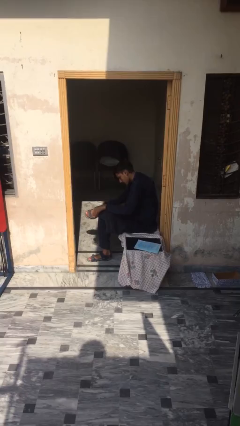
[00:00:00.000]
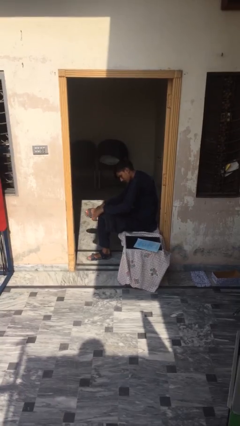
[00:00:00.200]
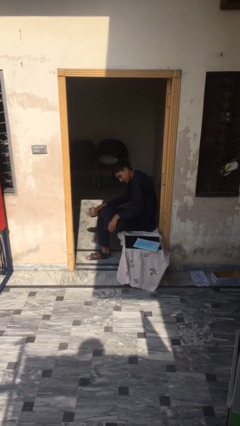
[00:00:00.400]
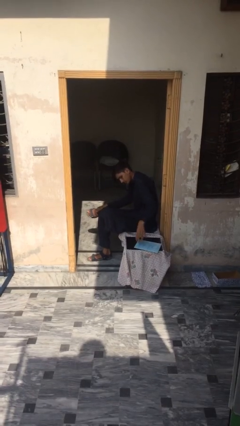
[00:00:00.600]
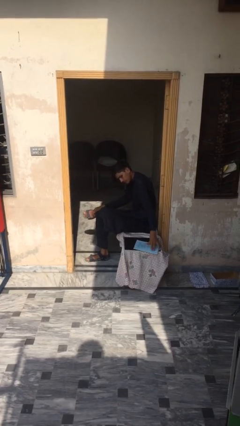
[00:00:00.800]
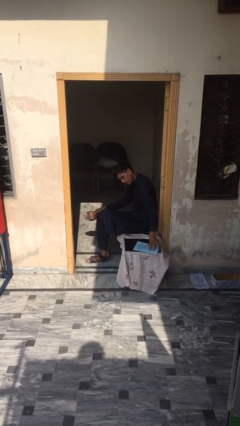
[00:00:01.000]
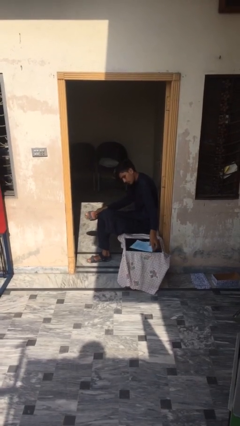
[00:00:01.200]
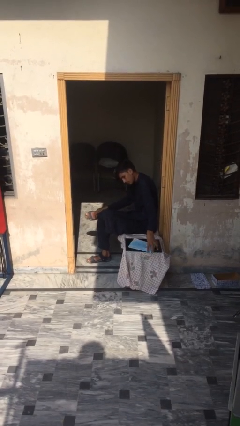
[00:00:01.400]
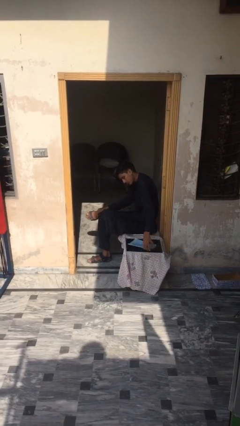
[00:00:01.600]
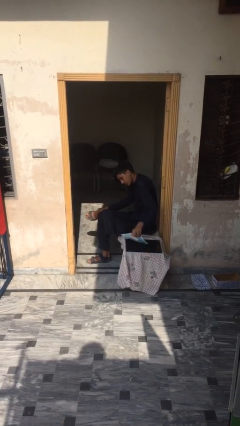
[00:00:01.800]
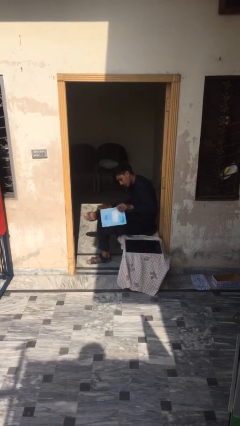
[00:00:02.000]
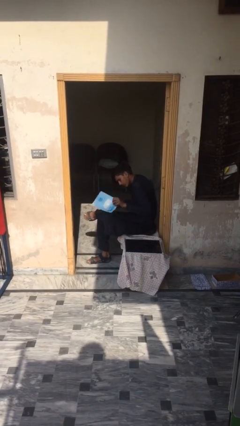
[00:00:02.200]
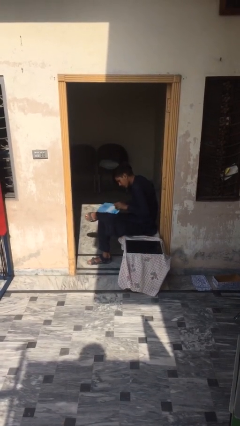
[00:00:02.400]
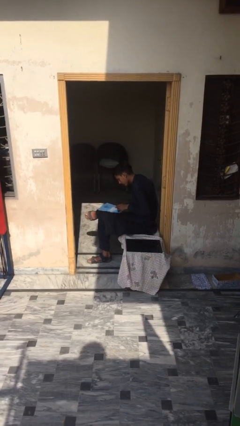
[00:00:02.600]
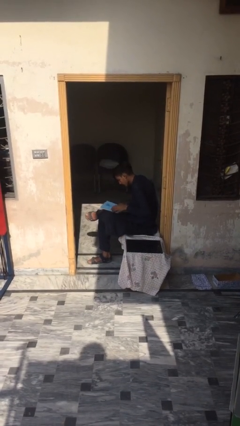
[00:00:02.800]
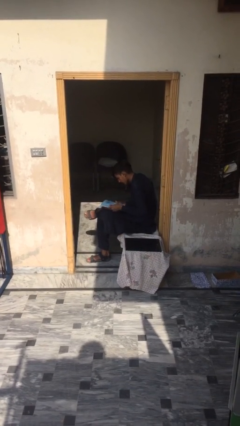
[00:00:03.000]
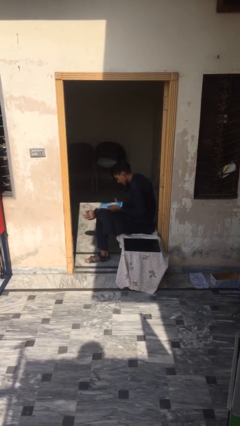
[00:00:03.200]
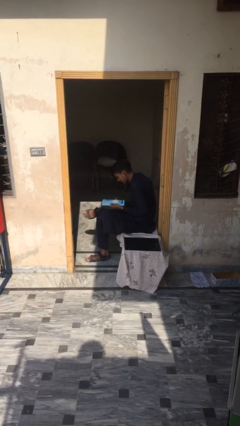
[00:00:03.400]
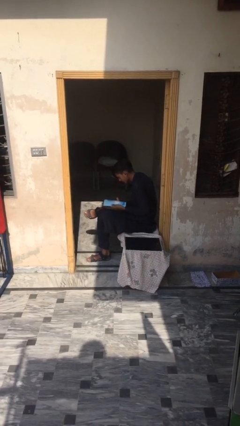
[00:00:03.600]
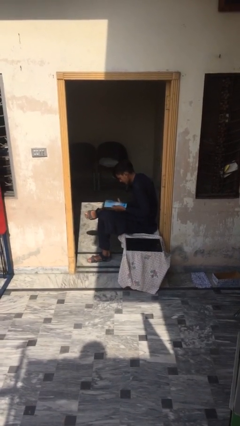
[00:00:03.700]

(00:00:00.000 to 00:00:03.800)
person picks up object from table

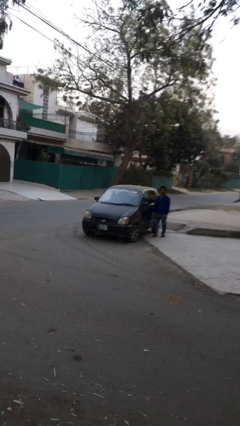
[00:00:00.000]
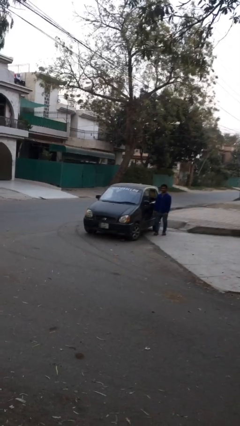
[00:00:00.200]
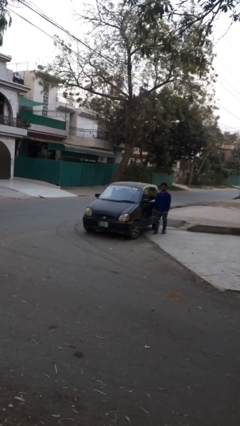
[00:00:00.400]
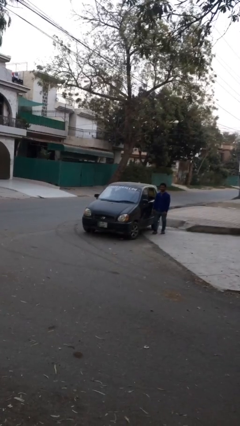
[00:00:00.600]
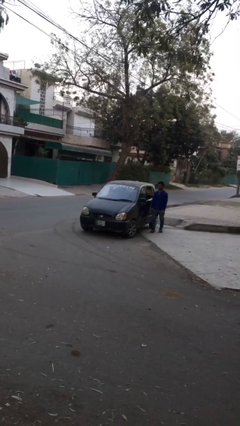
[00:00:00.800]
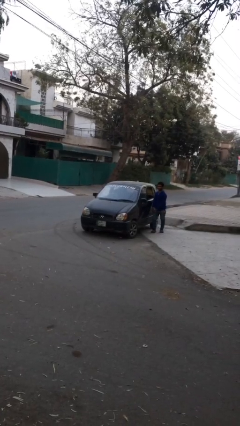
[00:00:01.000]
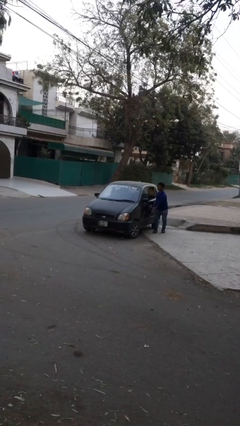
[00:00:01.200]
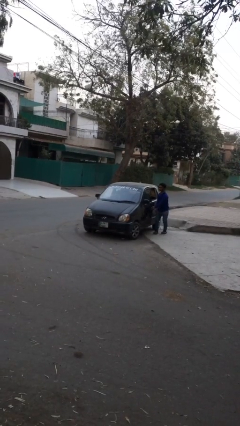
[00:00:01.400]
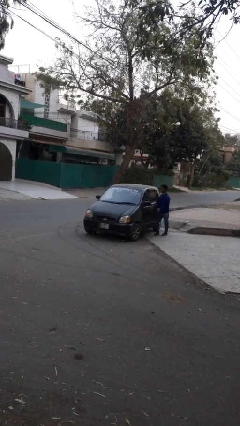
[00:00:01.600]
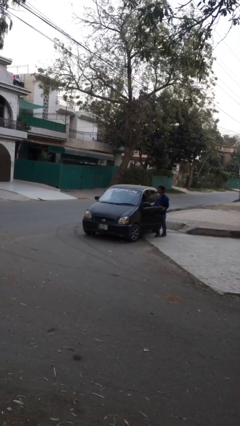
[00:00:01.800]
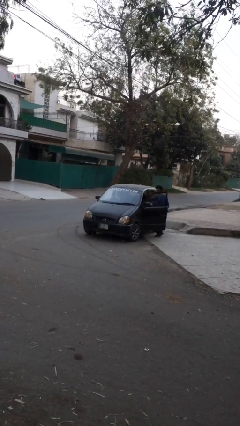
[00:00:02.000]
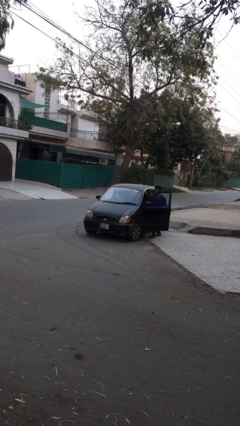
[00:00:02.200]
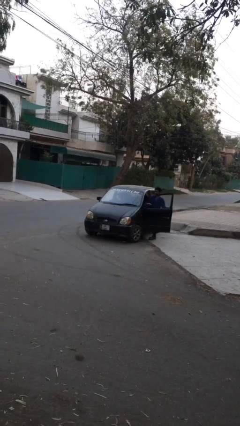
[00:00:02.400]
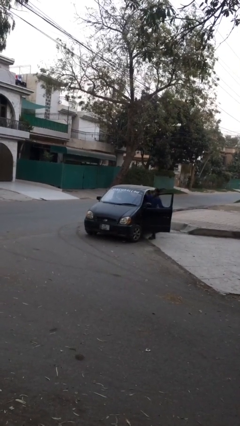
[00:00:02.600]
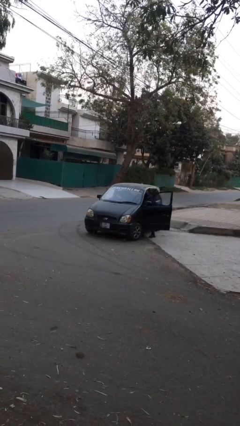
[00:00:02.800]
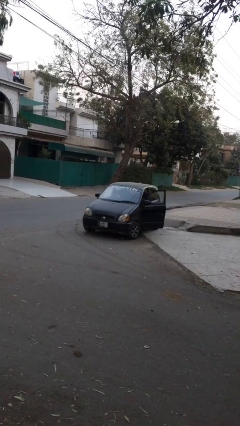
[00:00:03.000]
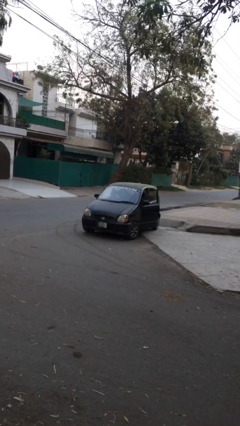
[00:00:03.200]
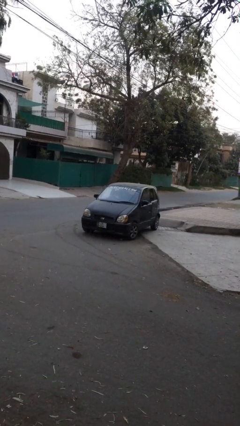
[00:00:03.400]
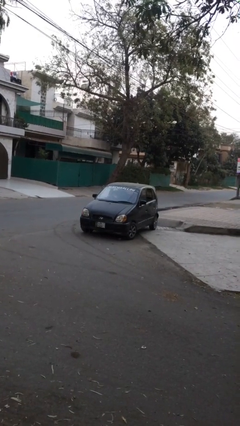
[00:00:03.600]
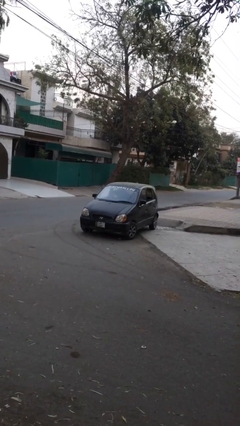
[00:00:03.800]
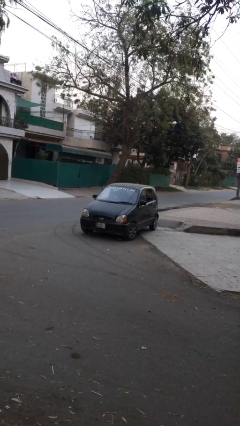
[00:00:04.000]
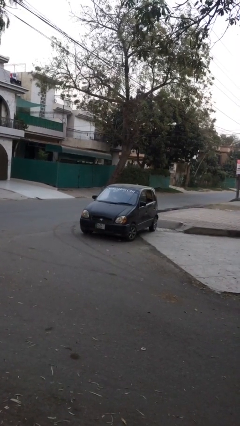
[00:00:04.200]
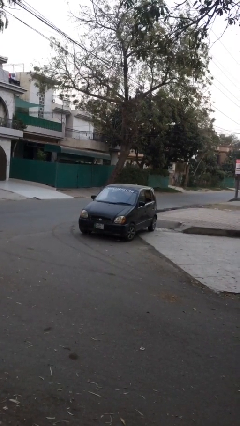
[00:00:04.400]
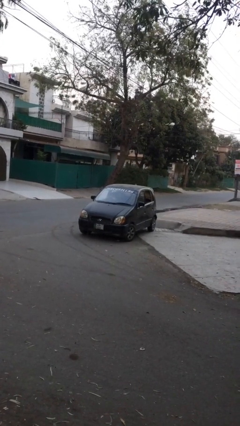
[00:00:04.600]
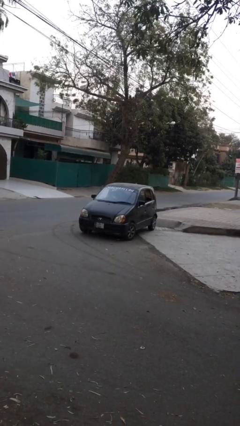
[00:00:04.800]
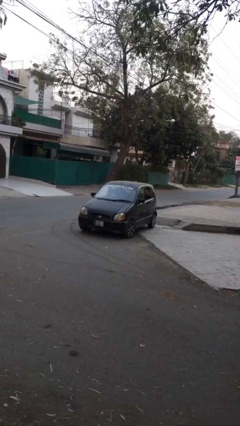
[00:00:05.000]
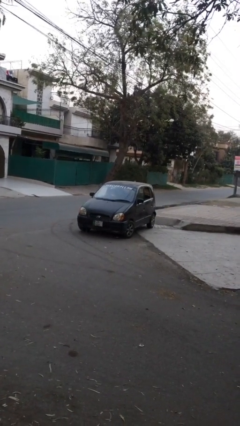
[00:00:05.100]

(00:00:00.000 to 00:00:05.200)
car picks up person

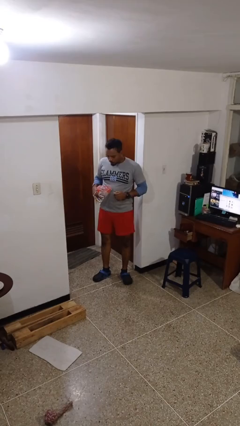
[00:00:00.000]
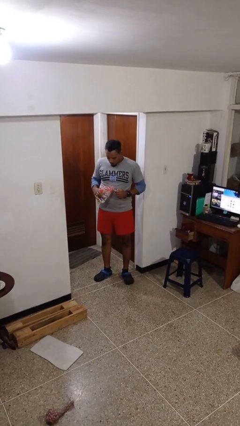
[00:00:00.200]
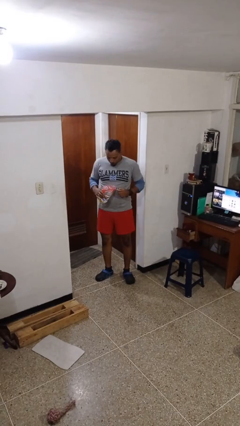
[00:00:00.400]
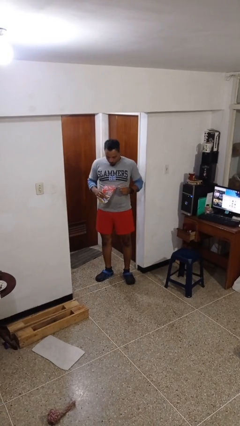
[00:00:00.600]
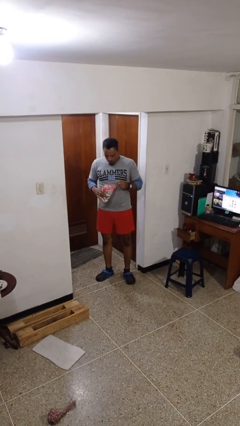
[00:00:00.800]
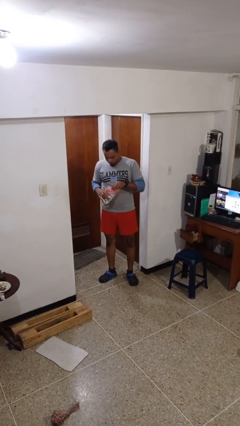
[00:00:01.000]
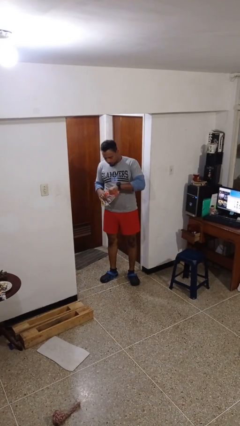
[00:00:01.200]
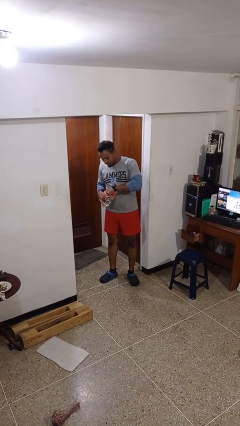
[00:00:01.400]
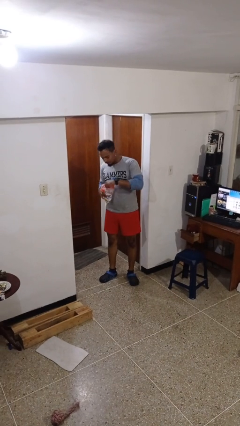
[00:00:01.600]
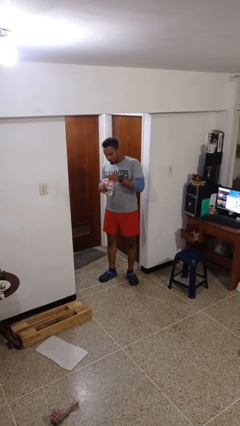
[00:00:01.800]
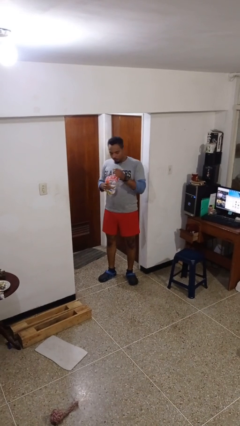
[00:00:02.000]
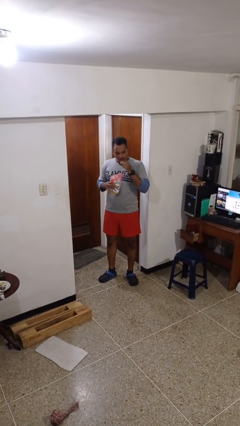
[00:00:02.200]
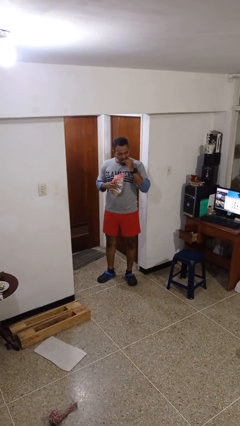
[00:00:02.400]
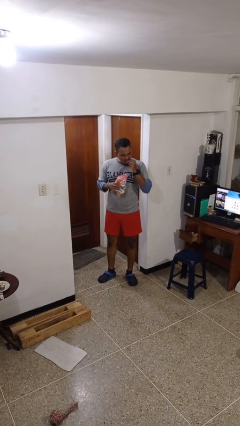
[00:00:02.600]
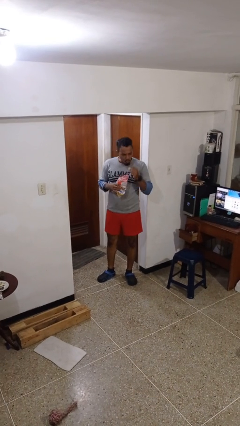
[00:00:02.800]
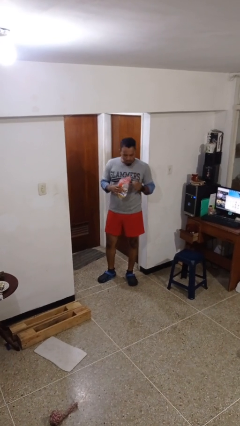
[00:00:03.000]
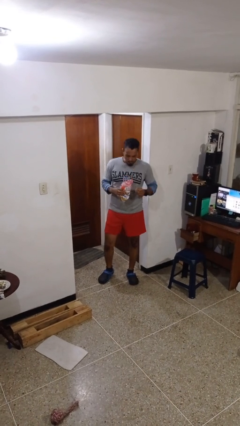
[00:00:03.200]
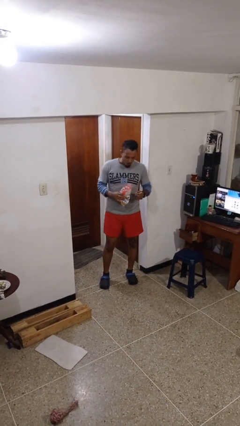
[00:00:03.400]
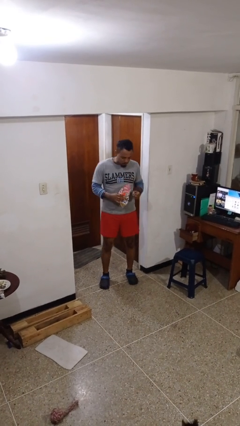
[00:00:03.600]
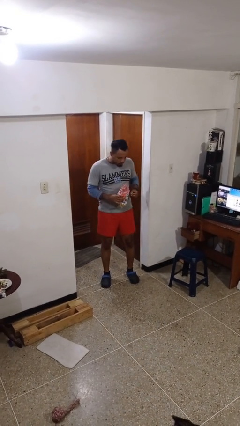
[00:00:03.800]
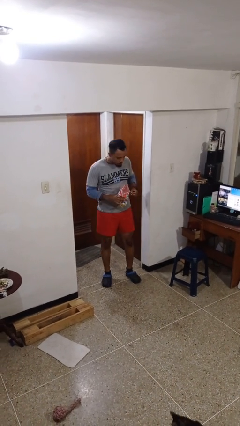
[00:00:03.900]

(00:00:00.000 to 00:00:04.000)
person eats snack from bag

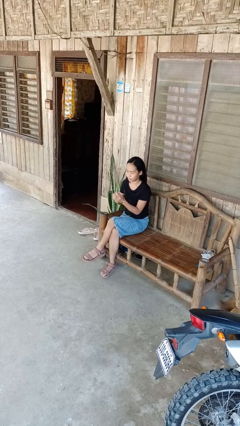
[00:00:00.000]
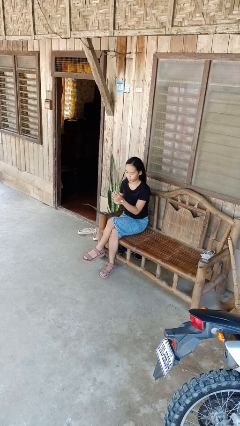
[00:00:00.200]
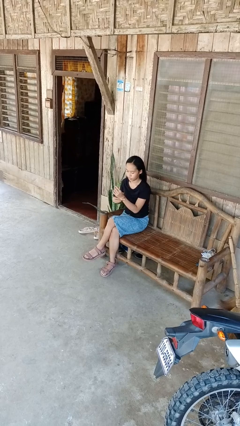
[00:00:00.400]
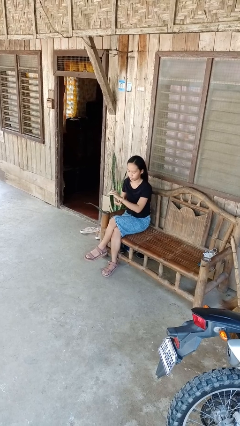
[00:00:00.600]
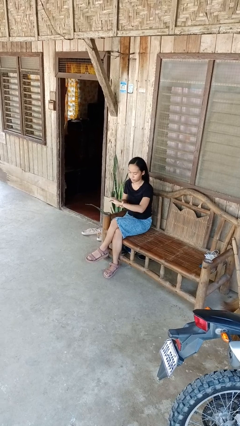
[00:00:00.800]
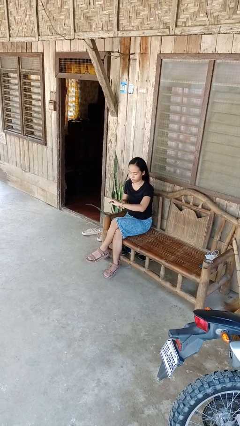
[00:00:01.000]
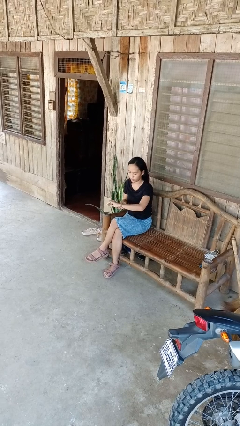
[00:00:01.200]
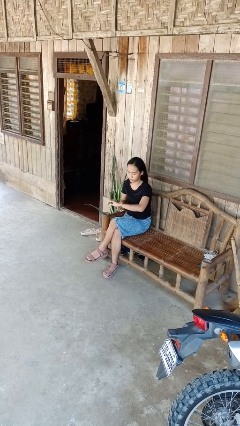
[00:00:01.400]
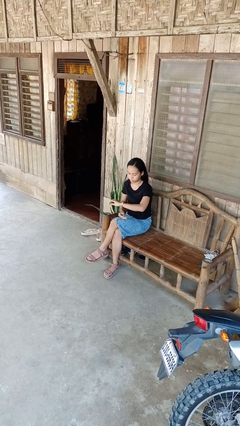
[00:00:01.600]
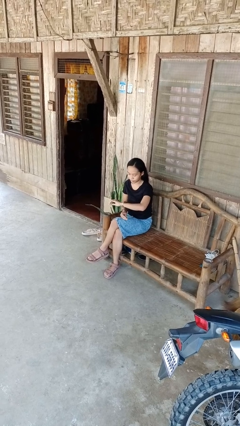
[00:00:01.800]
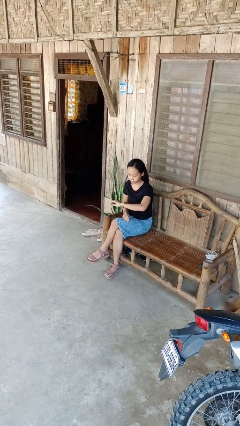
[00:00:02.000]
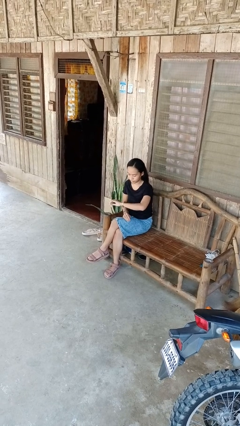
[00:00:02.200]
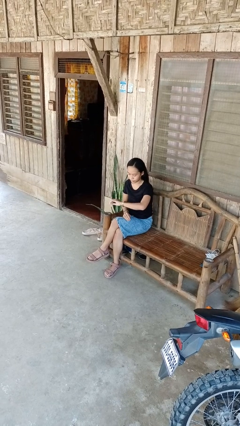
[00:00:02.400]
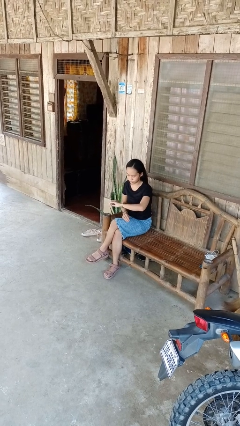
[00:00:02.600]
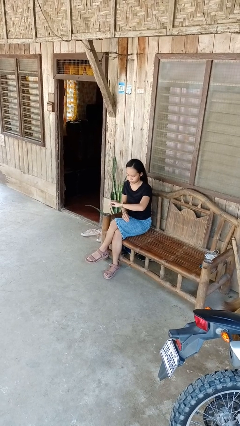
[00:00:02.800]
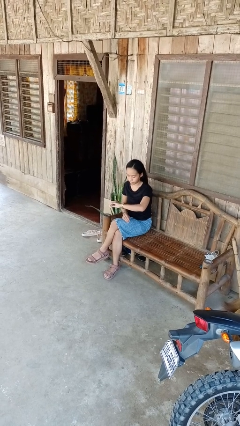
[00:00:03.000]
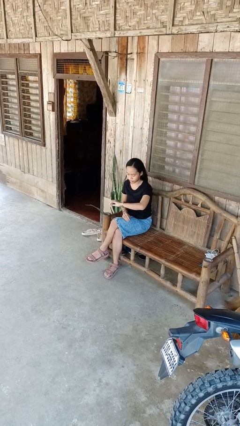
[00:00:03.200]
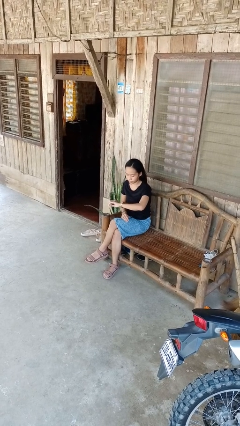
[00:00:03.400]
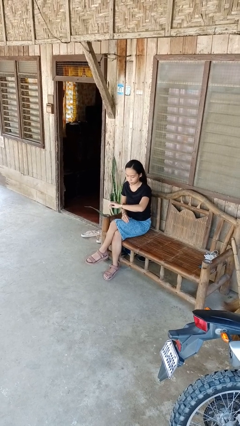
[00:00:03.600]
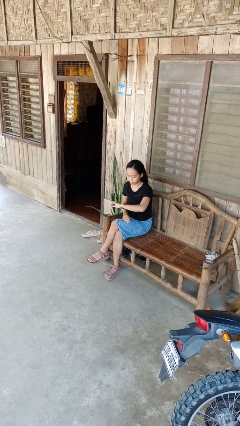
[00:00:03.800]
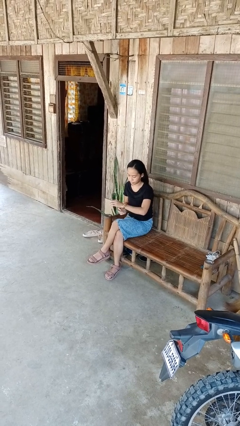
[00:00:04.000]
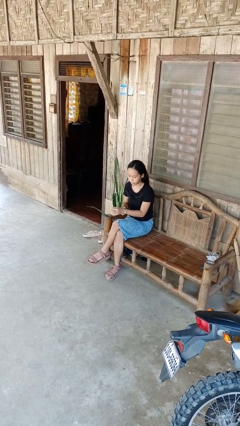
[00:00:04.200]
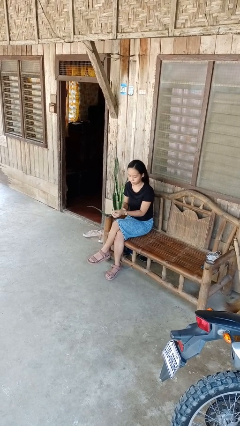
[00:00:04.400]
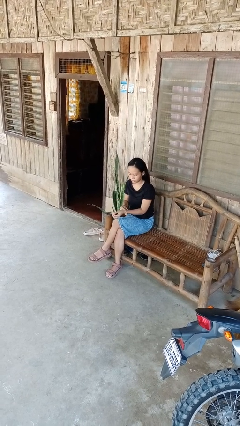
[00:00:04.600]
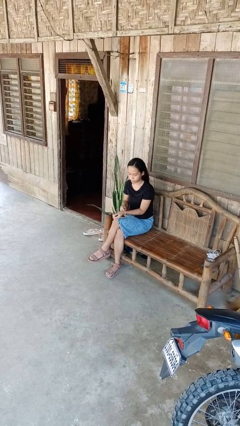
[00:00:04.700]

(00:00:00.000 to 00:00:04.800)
person puts on wristwatch
